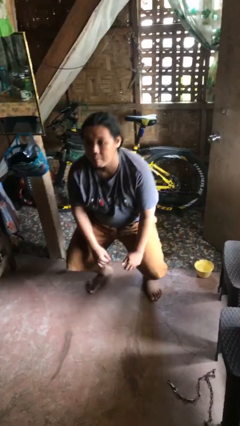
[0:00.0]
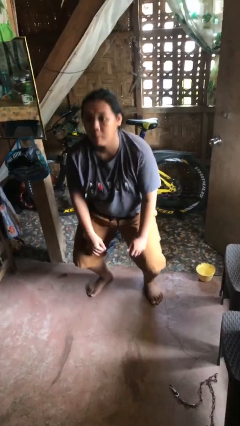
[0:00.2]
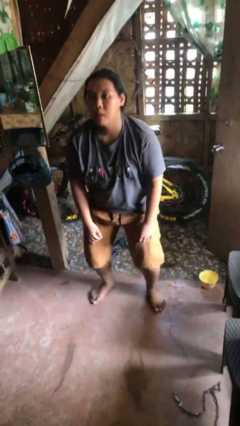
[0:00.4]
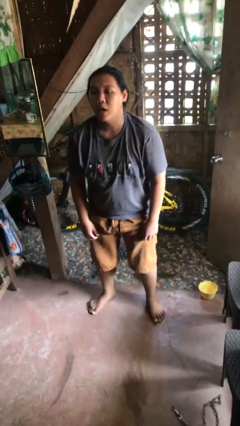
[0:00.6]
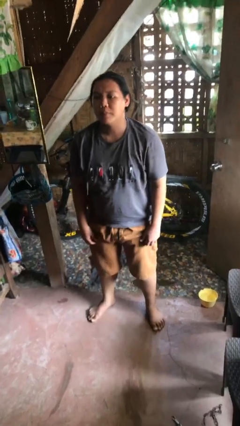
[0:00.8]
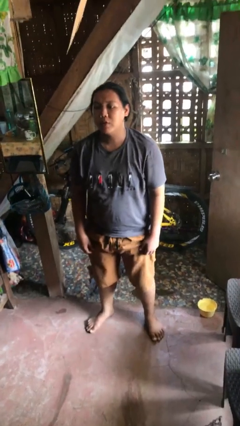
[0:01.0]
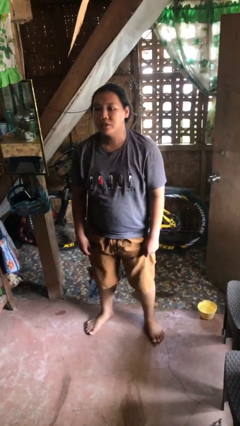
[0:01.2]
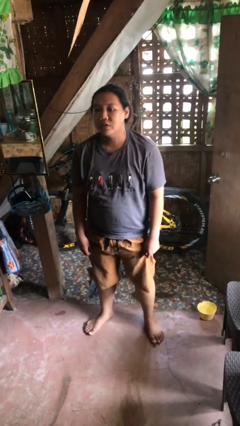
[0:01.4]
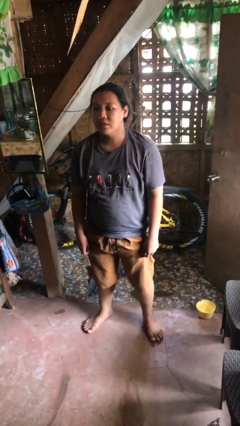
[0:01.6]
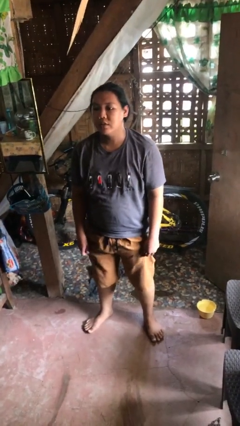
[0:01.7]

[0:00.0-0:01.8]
person stands up

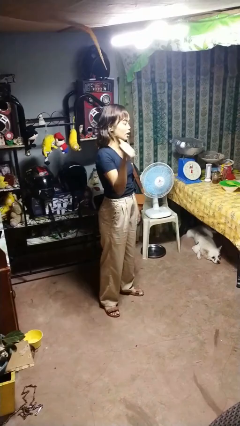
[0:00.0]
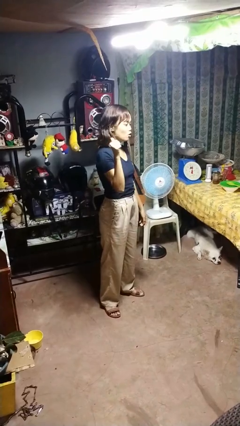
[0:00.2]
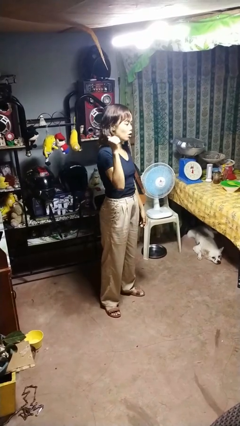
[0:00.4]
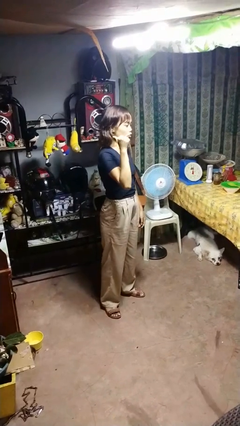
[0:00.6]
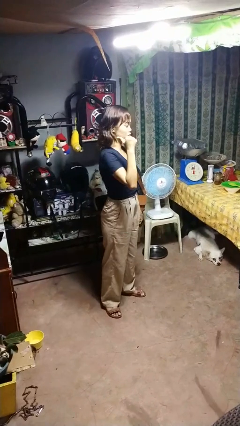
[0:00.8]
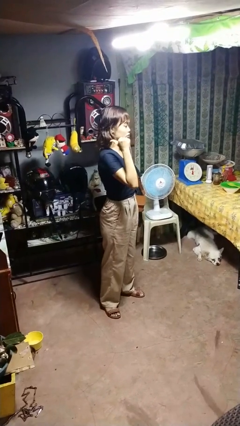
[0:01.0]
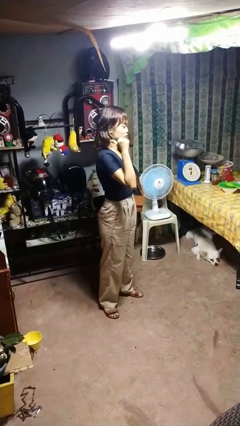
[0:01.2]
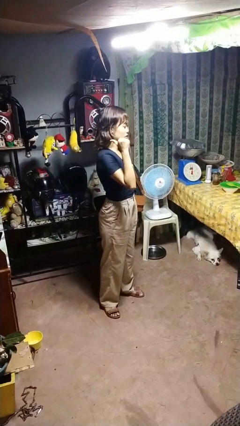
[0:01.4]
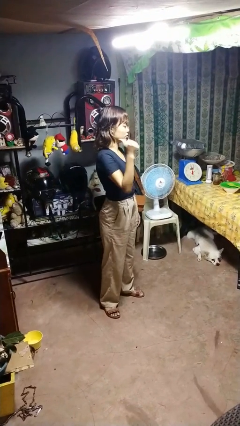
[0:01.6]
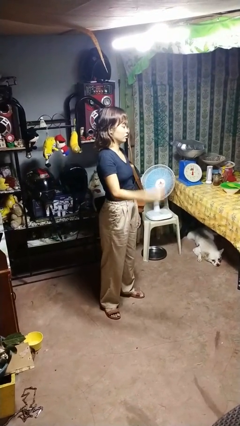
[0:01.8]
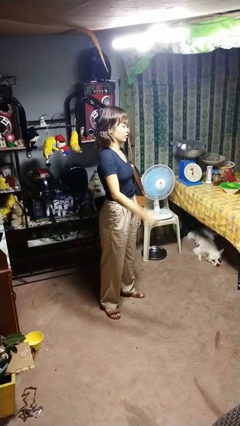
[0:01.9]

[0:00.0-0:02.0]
person gestures behind me

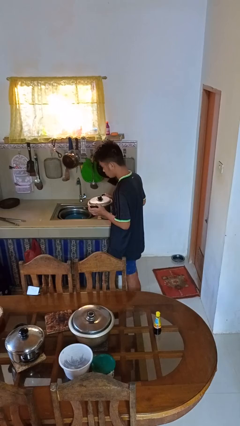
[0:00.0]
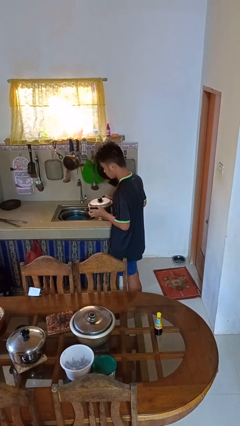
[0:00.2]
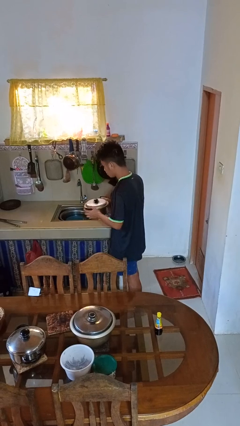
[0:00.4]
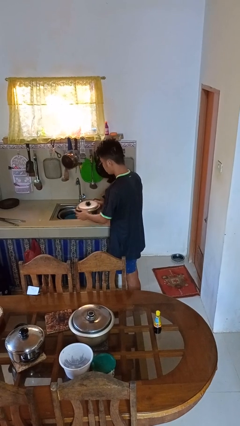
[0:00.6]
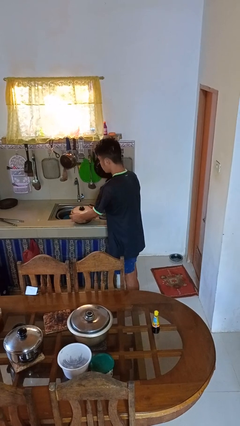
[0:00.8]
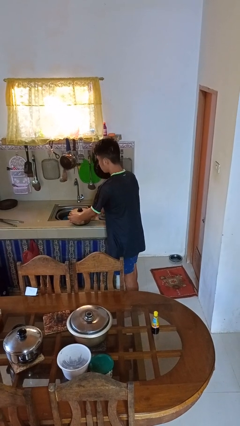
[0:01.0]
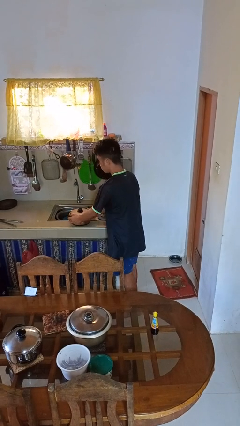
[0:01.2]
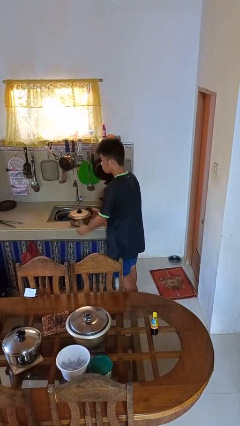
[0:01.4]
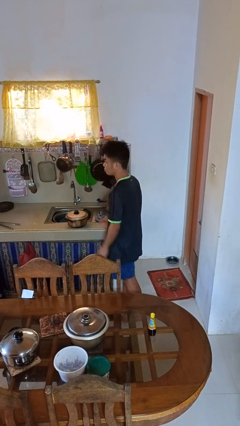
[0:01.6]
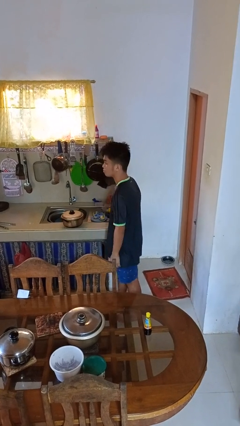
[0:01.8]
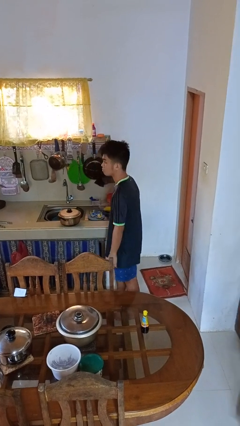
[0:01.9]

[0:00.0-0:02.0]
person puts down object on countertop

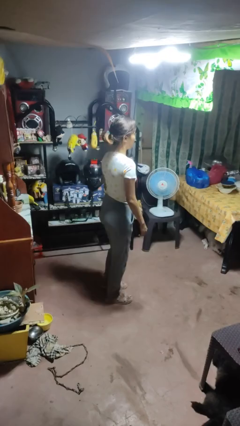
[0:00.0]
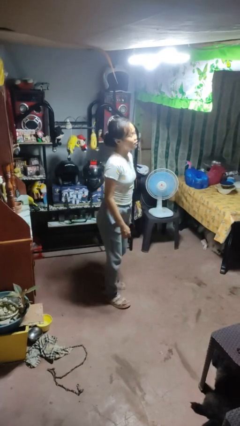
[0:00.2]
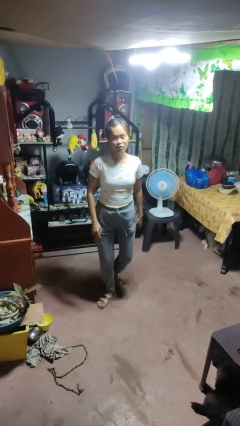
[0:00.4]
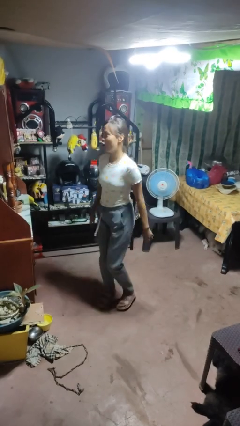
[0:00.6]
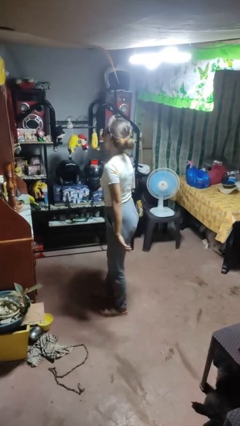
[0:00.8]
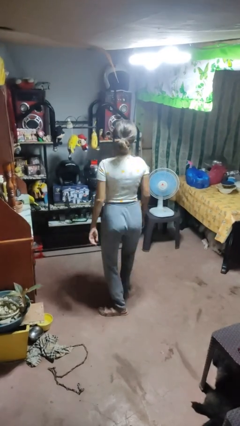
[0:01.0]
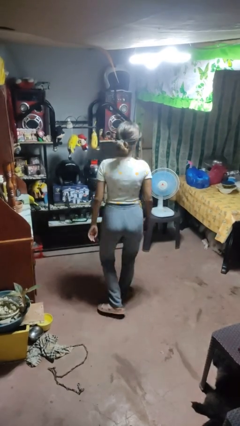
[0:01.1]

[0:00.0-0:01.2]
person twirls

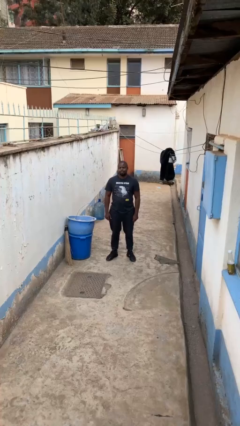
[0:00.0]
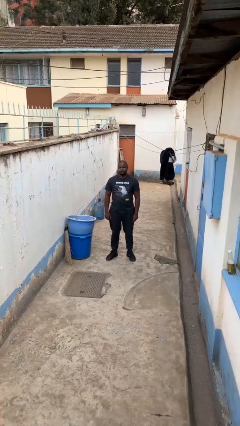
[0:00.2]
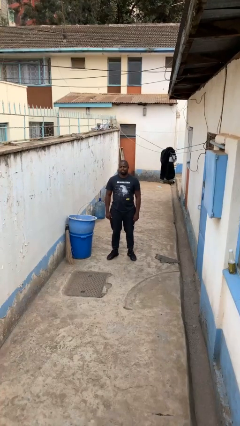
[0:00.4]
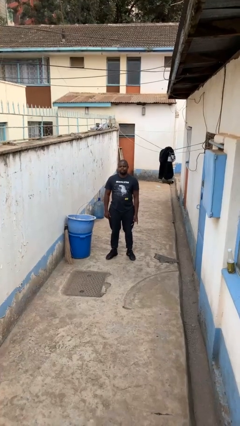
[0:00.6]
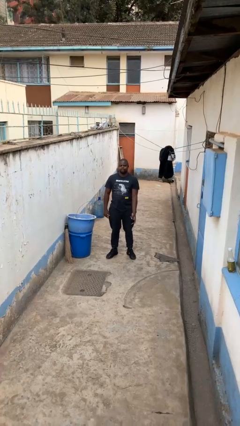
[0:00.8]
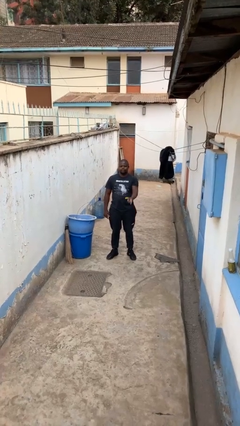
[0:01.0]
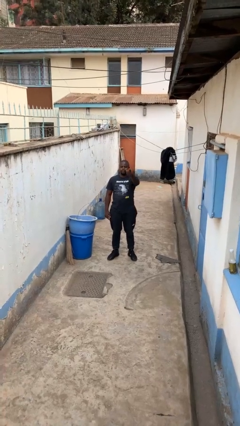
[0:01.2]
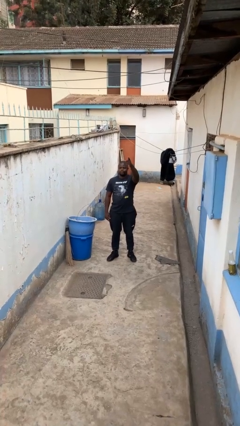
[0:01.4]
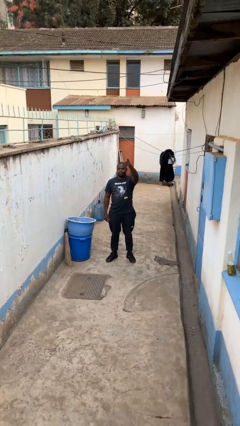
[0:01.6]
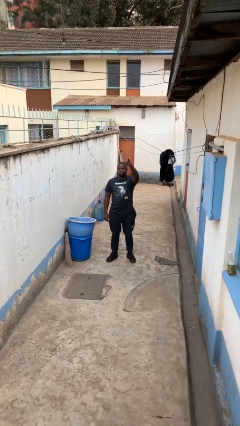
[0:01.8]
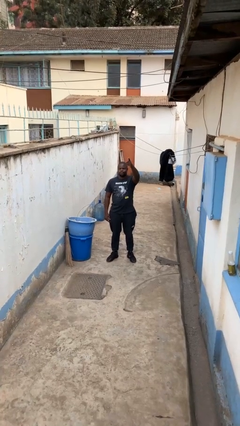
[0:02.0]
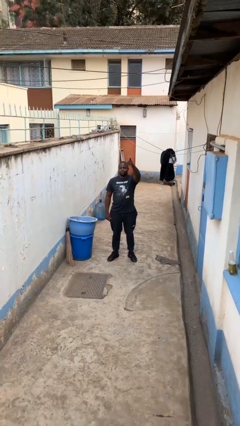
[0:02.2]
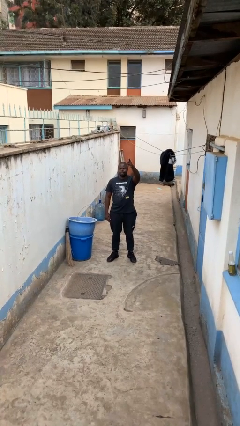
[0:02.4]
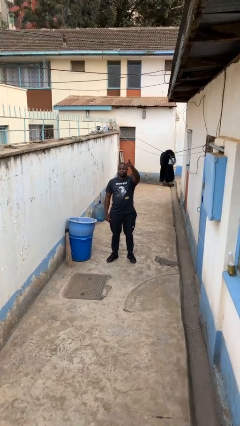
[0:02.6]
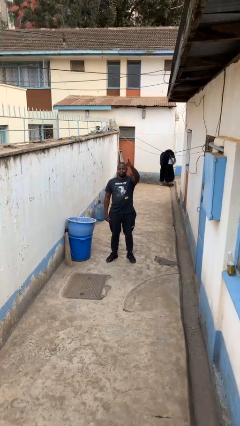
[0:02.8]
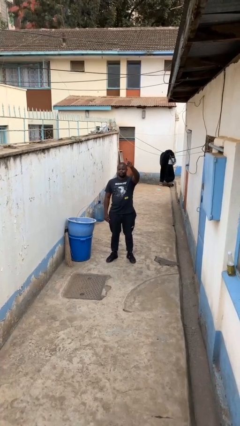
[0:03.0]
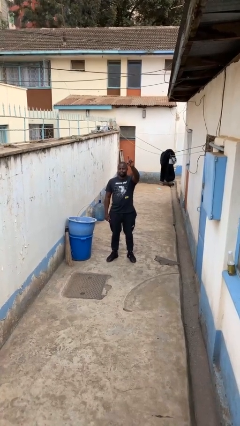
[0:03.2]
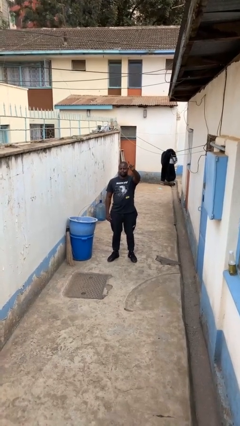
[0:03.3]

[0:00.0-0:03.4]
person gestures swipe up

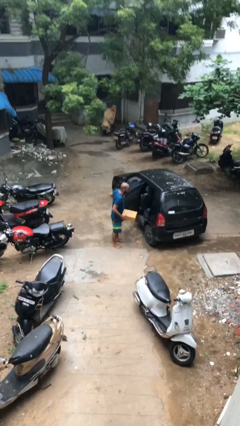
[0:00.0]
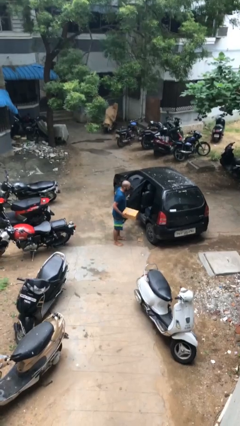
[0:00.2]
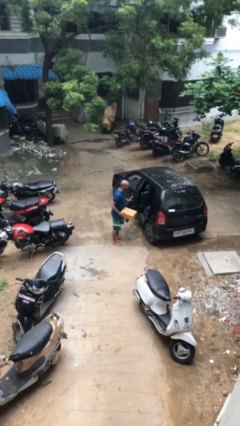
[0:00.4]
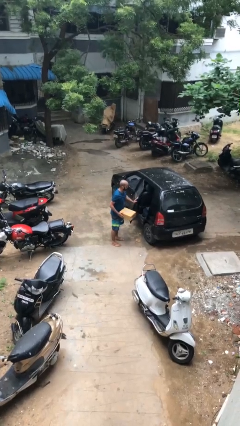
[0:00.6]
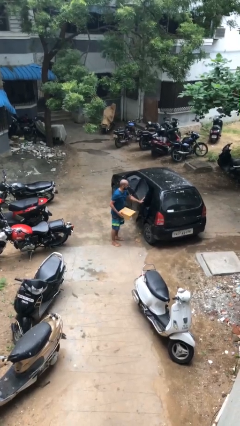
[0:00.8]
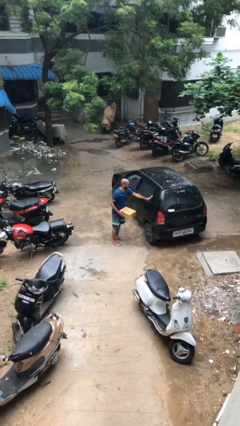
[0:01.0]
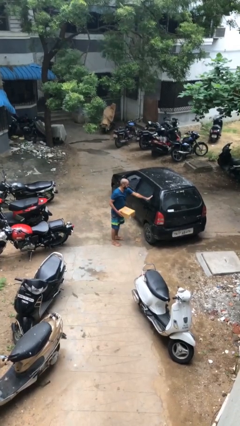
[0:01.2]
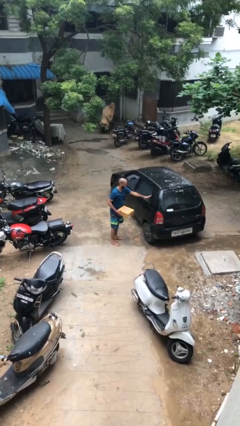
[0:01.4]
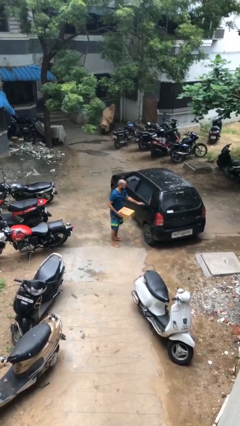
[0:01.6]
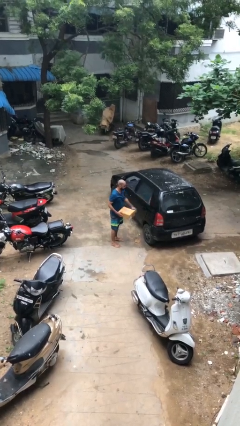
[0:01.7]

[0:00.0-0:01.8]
person closes car door

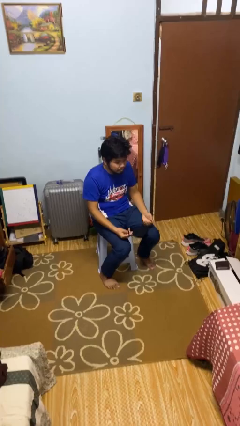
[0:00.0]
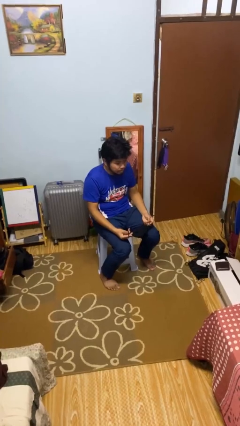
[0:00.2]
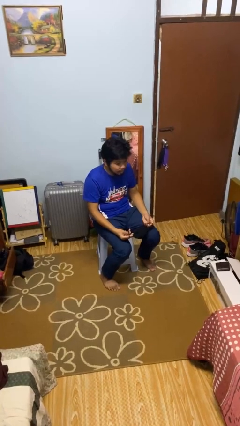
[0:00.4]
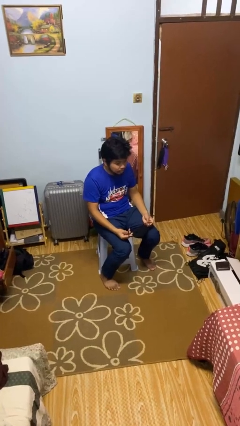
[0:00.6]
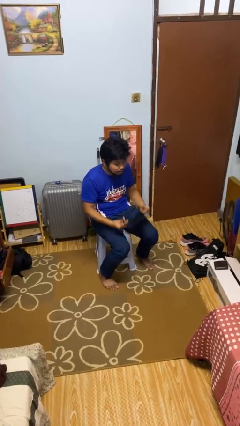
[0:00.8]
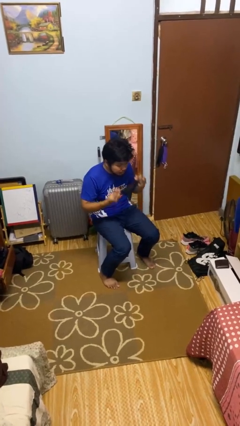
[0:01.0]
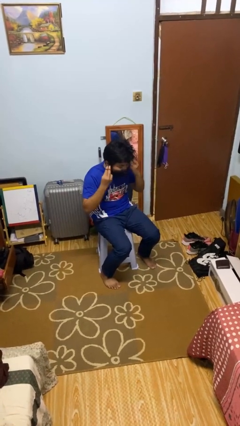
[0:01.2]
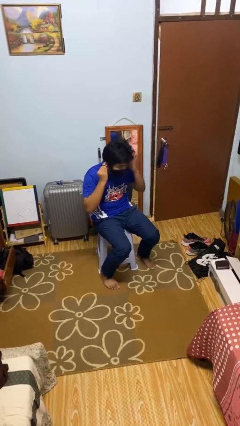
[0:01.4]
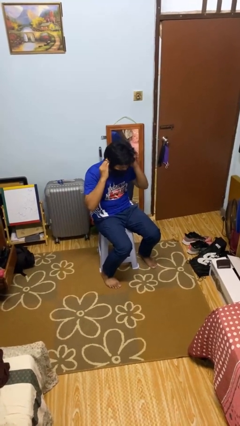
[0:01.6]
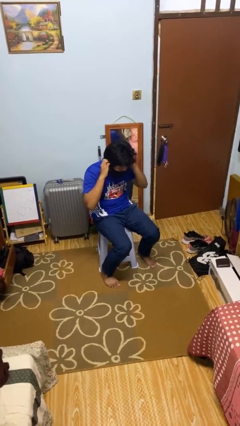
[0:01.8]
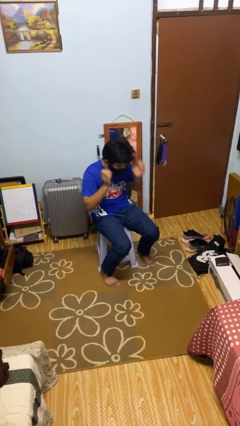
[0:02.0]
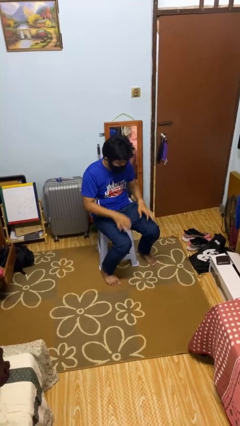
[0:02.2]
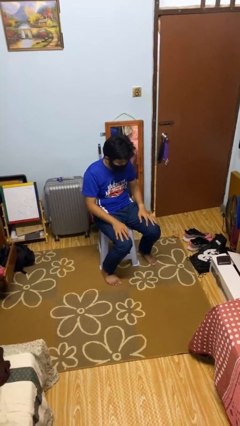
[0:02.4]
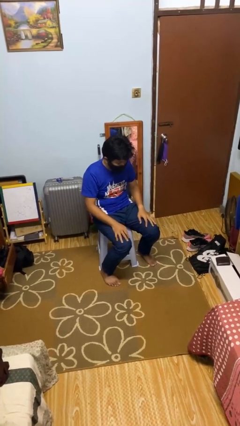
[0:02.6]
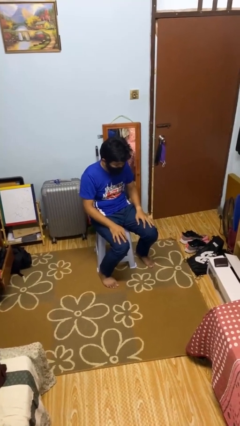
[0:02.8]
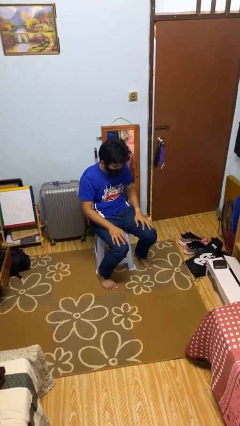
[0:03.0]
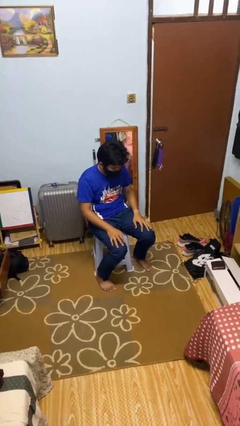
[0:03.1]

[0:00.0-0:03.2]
person puts on facemask

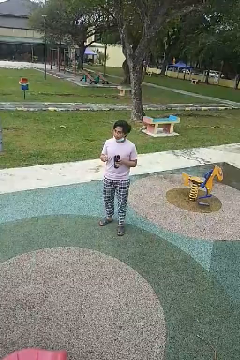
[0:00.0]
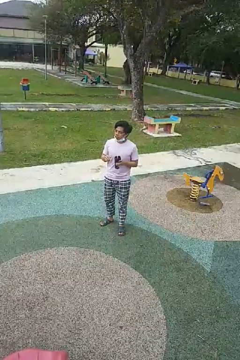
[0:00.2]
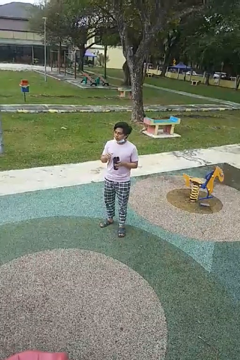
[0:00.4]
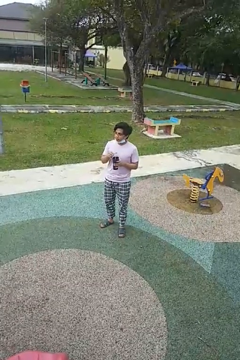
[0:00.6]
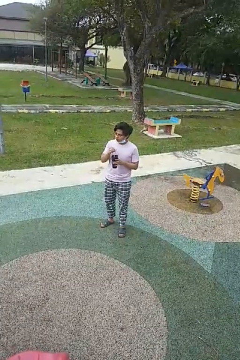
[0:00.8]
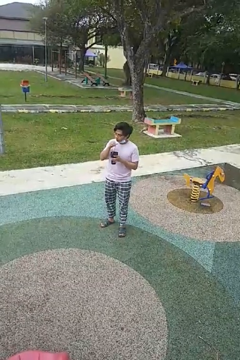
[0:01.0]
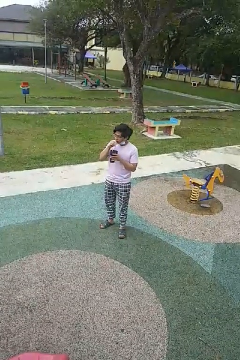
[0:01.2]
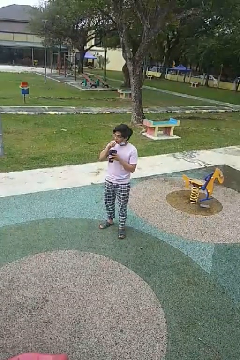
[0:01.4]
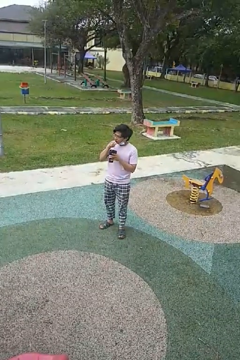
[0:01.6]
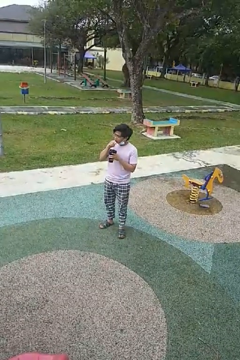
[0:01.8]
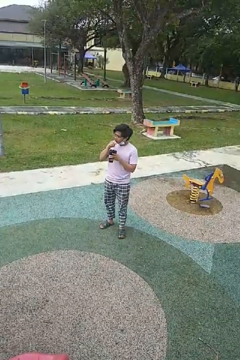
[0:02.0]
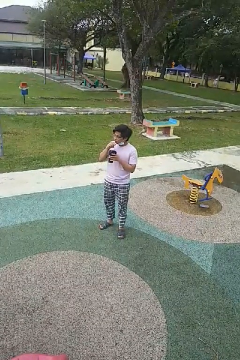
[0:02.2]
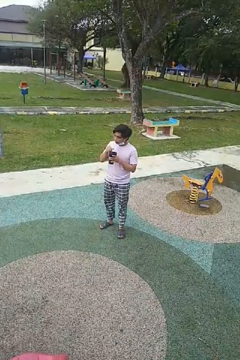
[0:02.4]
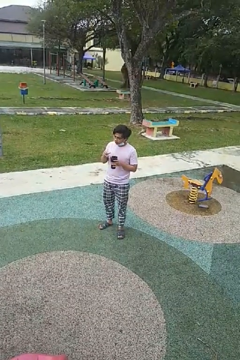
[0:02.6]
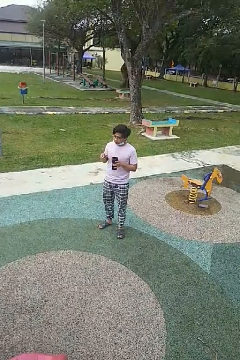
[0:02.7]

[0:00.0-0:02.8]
person drinks from straw
